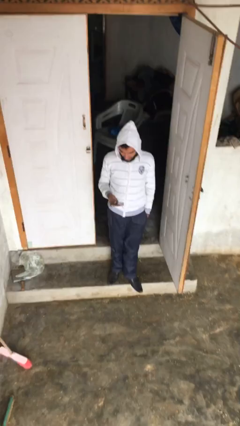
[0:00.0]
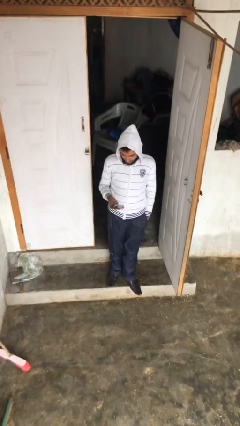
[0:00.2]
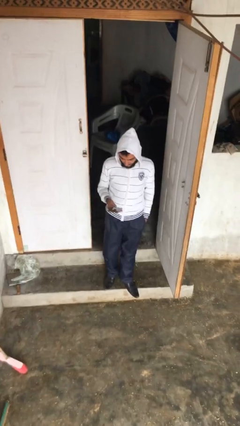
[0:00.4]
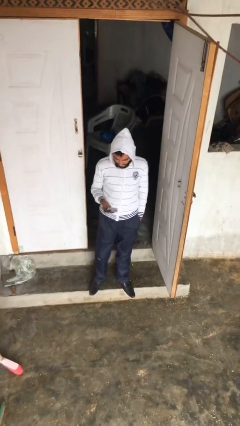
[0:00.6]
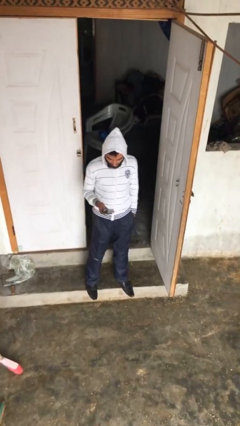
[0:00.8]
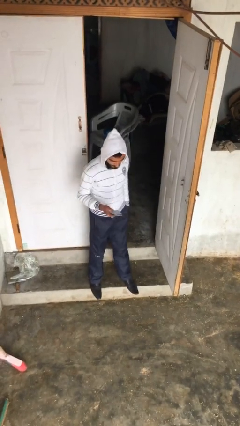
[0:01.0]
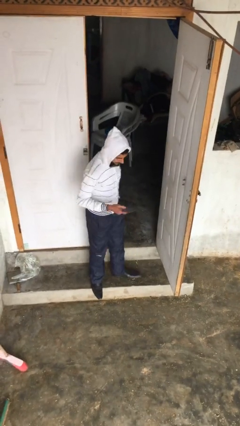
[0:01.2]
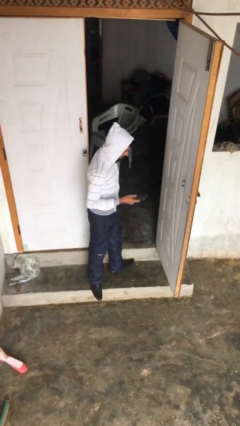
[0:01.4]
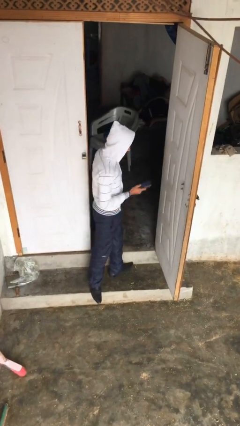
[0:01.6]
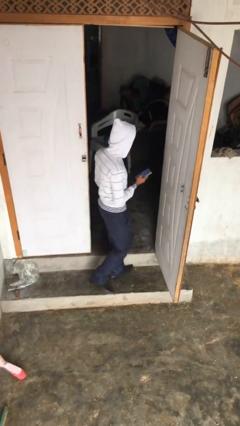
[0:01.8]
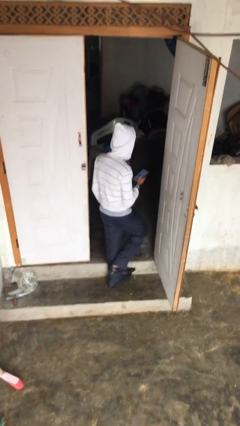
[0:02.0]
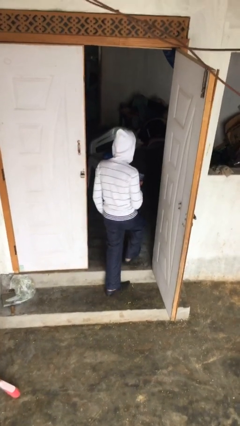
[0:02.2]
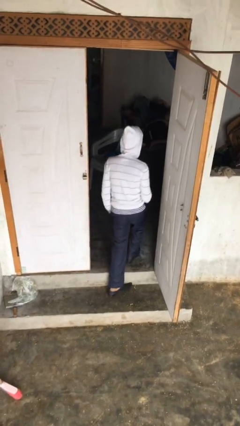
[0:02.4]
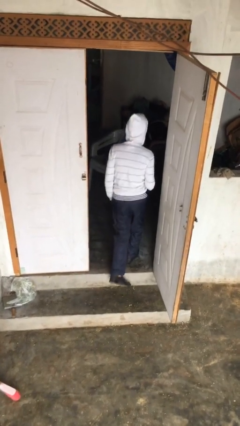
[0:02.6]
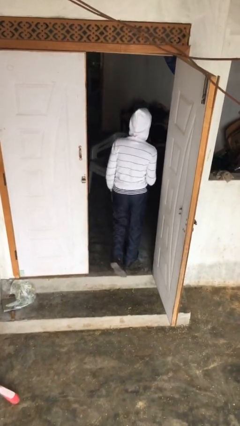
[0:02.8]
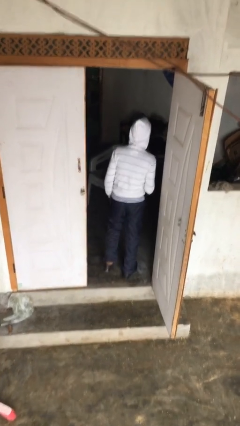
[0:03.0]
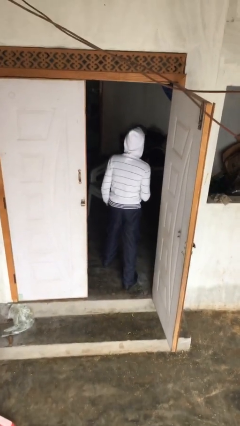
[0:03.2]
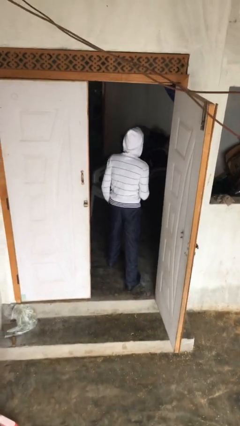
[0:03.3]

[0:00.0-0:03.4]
person exits scene through structure

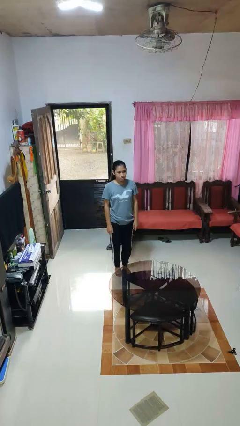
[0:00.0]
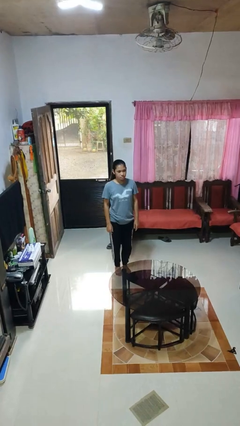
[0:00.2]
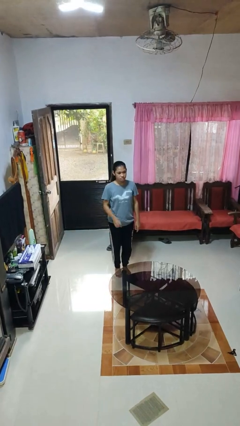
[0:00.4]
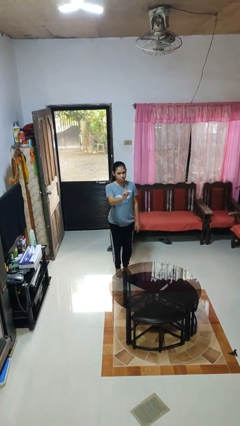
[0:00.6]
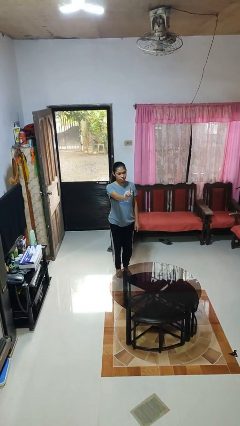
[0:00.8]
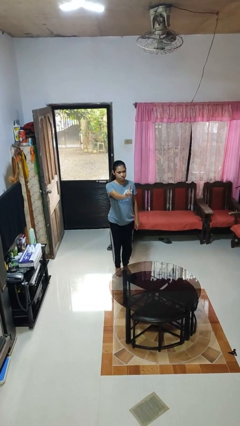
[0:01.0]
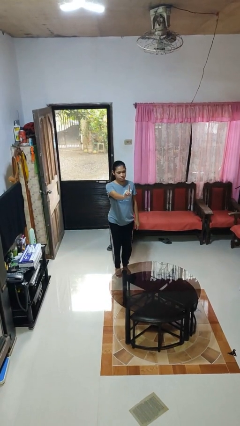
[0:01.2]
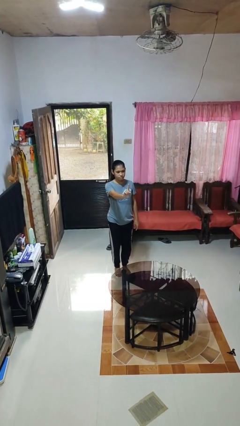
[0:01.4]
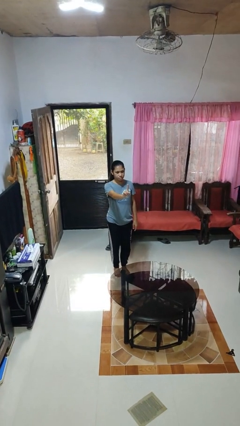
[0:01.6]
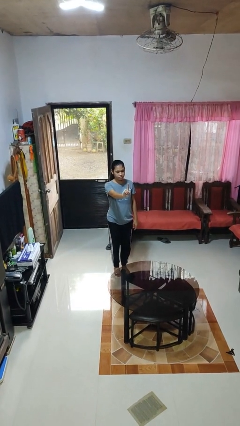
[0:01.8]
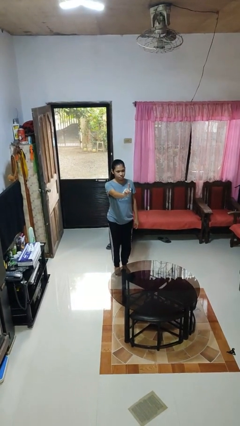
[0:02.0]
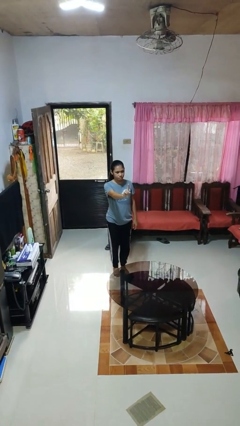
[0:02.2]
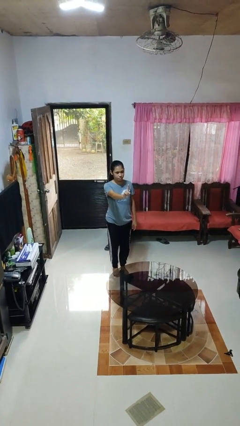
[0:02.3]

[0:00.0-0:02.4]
person gestures number one

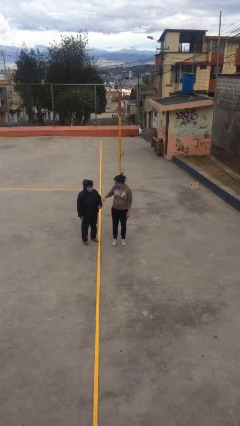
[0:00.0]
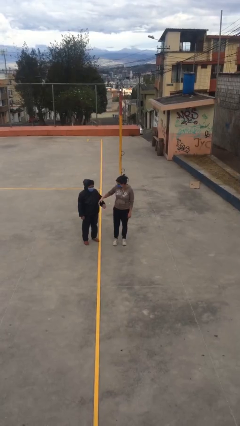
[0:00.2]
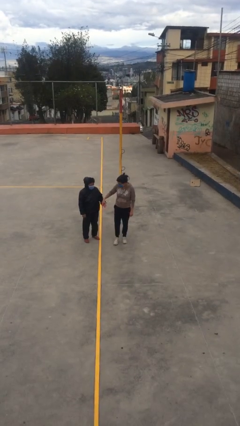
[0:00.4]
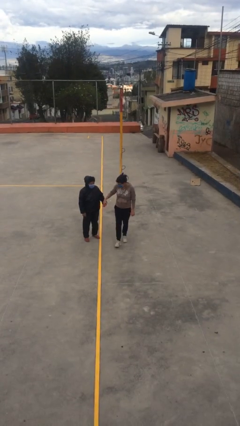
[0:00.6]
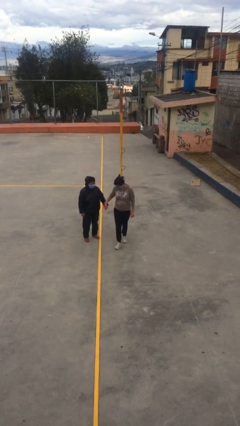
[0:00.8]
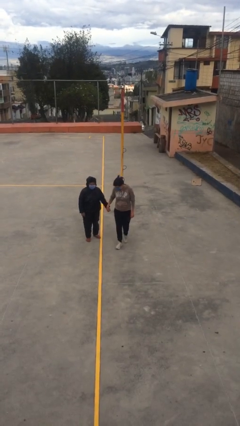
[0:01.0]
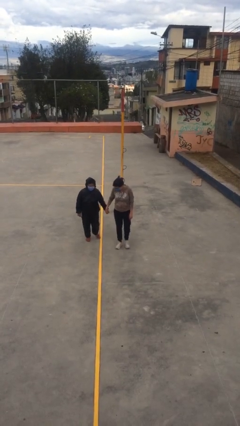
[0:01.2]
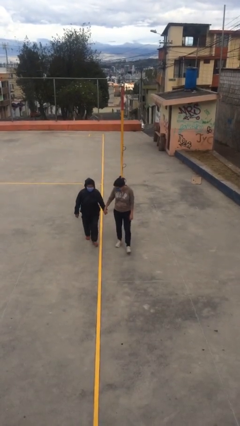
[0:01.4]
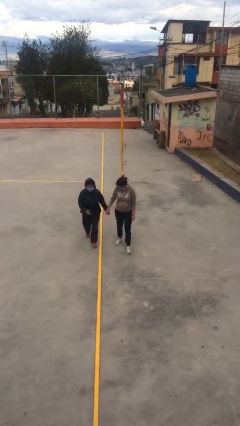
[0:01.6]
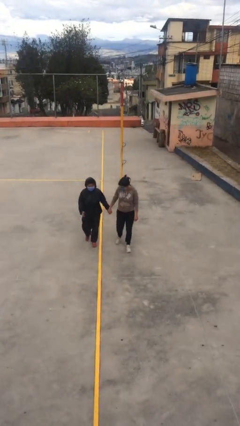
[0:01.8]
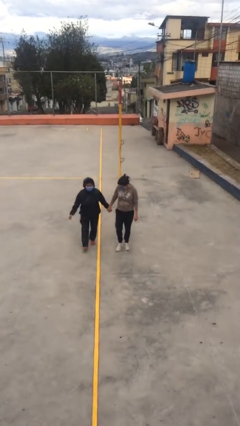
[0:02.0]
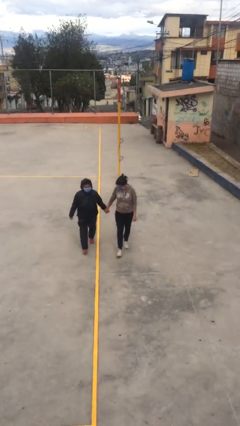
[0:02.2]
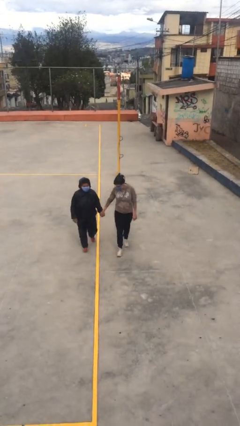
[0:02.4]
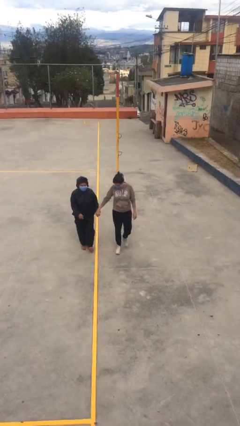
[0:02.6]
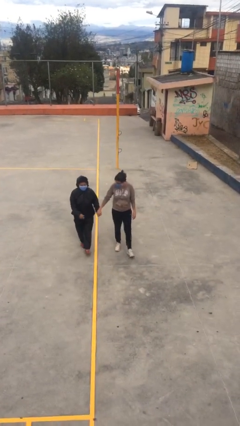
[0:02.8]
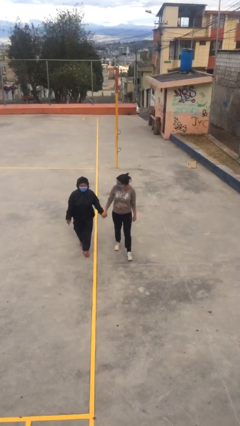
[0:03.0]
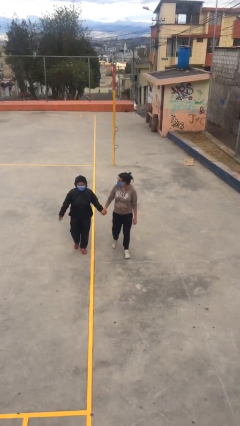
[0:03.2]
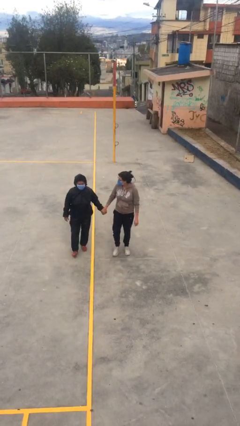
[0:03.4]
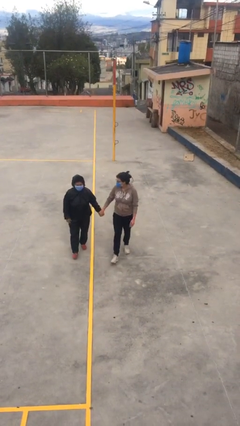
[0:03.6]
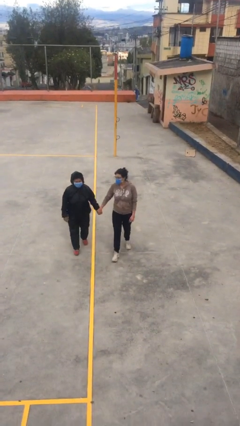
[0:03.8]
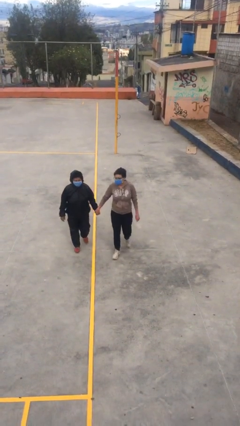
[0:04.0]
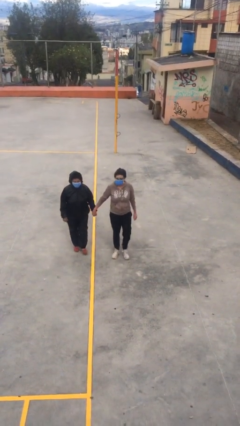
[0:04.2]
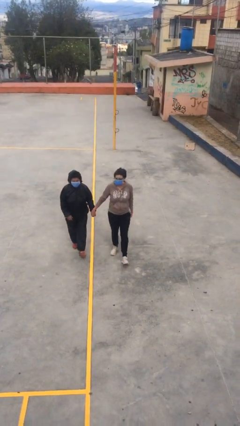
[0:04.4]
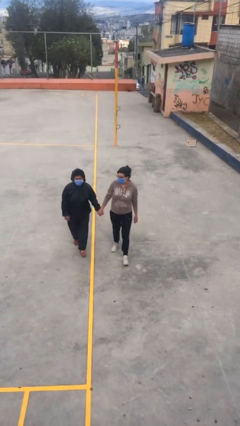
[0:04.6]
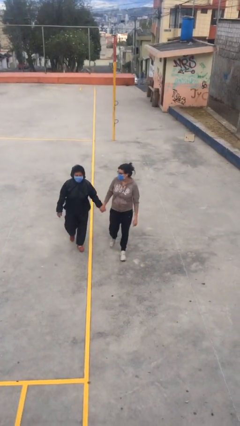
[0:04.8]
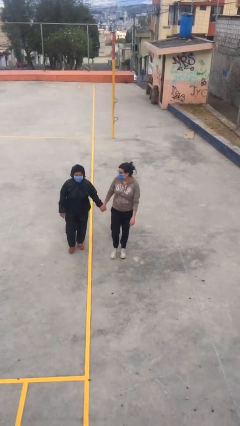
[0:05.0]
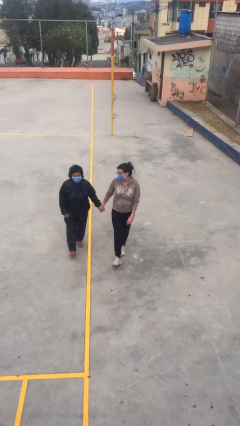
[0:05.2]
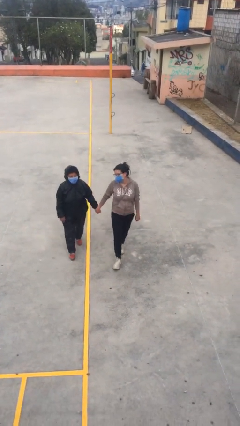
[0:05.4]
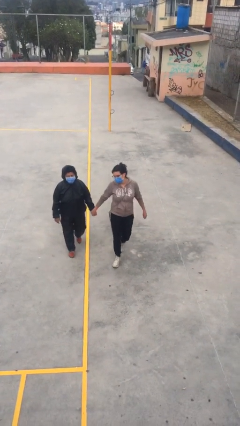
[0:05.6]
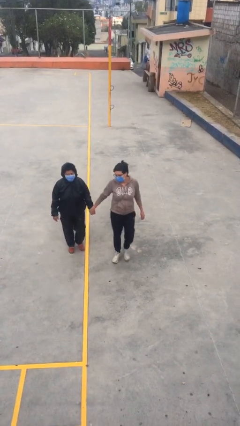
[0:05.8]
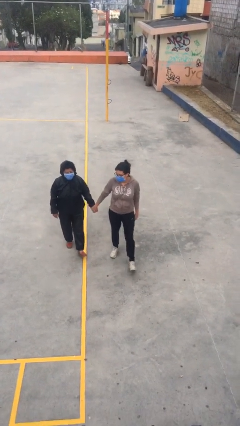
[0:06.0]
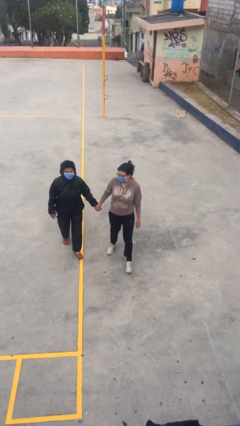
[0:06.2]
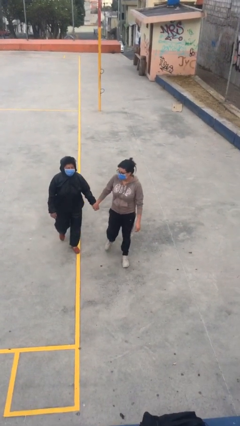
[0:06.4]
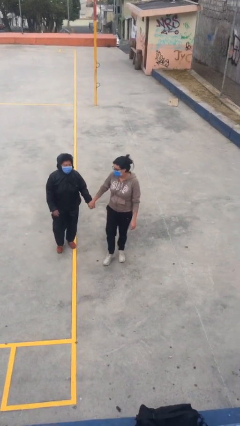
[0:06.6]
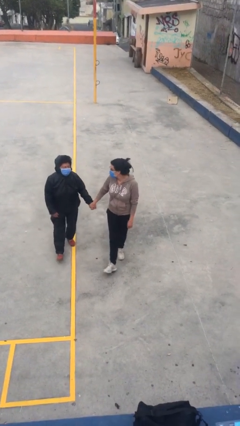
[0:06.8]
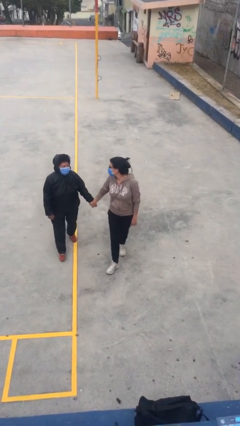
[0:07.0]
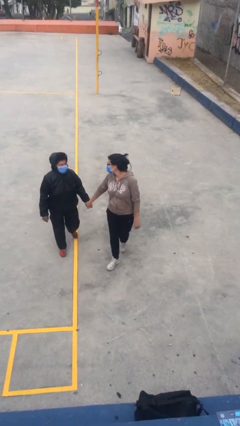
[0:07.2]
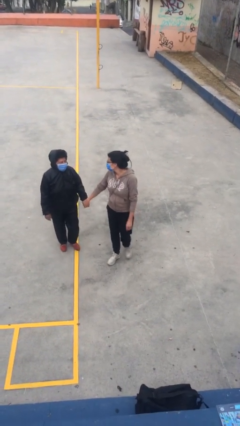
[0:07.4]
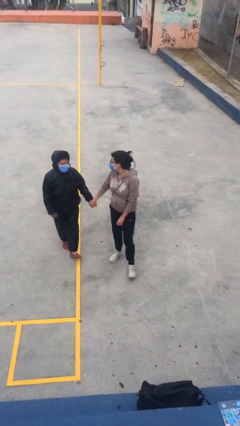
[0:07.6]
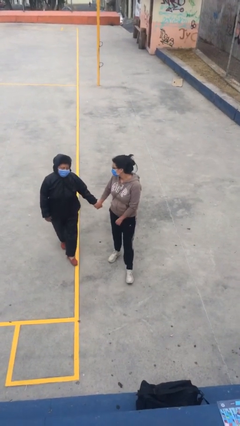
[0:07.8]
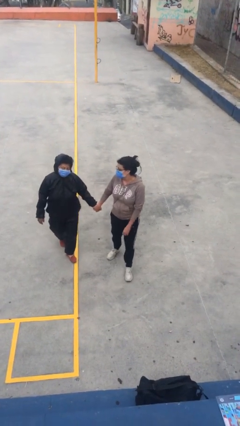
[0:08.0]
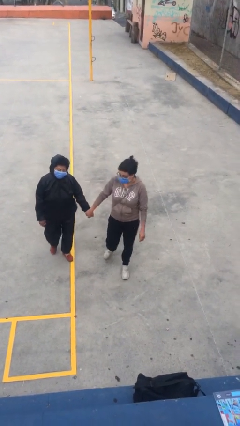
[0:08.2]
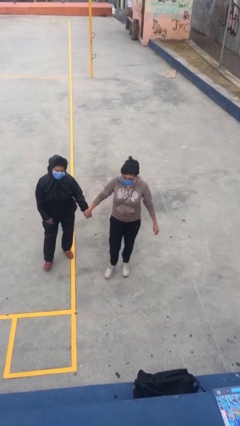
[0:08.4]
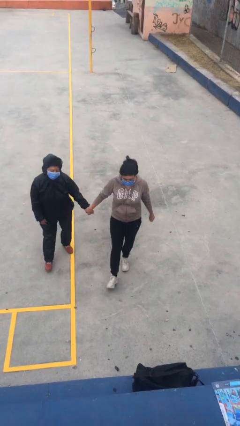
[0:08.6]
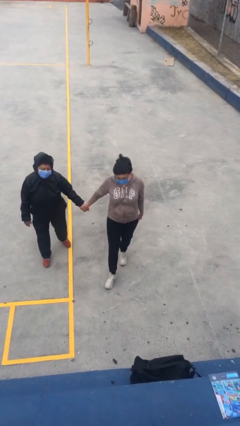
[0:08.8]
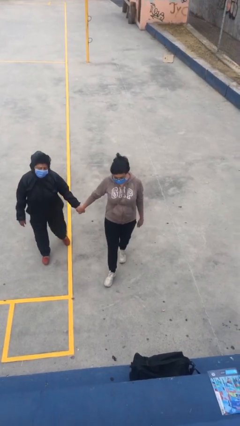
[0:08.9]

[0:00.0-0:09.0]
person holds hand

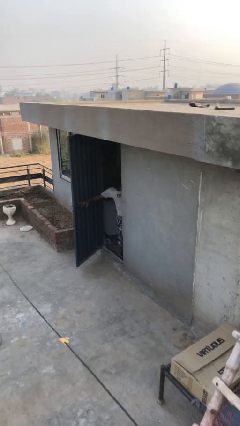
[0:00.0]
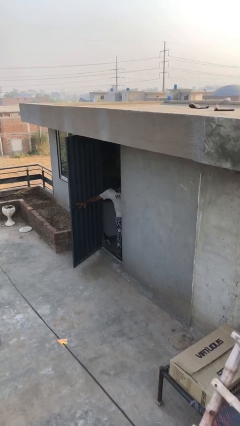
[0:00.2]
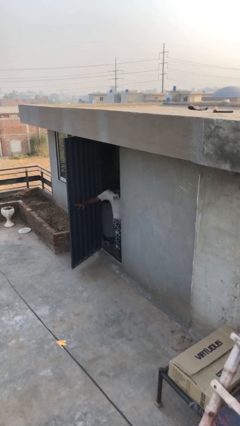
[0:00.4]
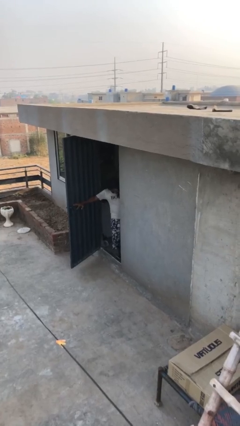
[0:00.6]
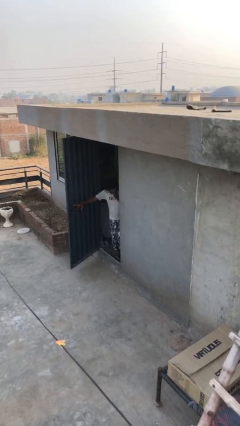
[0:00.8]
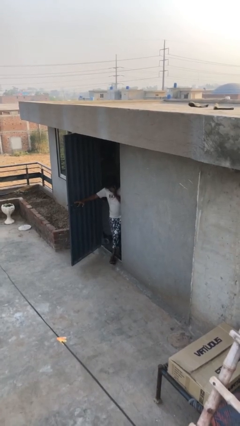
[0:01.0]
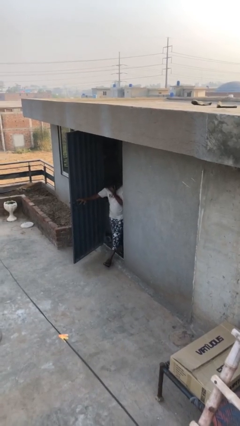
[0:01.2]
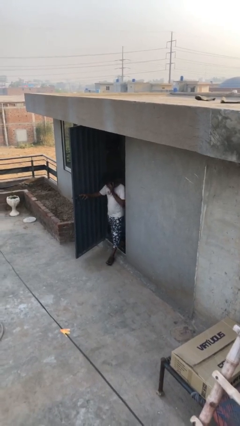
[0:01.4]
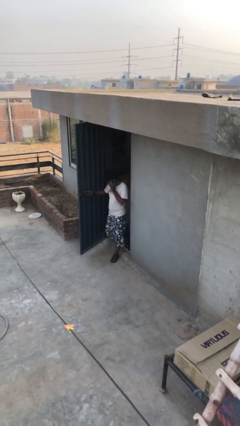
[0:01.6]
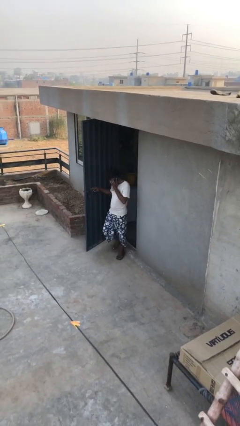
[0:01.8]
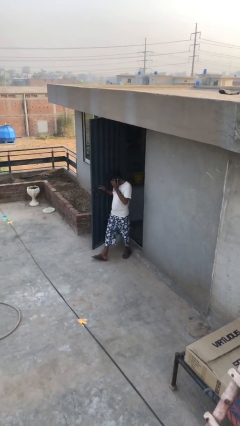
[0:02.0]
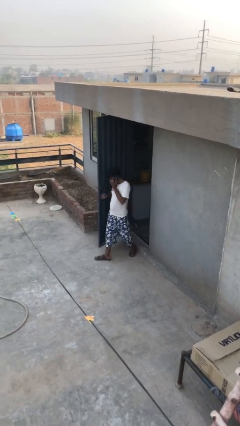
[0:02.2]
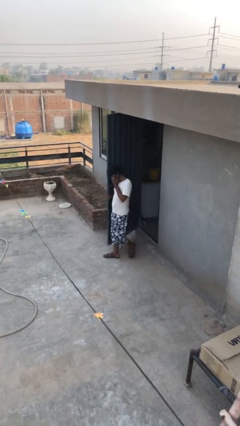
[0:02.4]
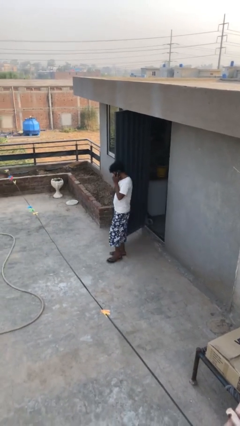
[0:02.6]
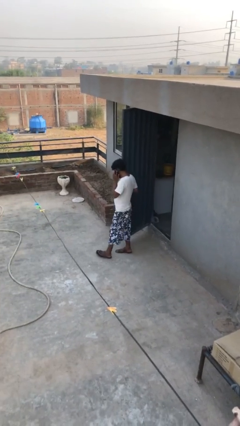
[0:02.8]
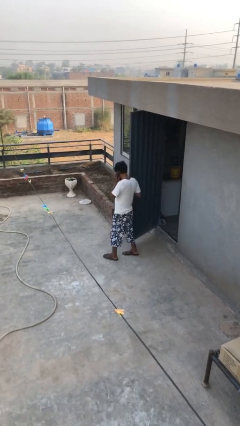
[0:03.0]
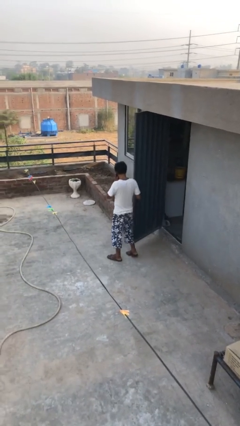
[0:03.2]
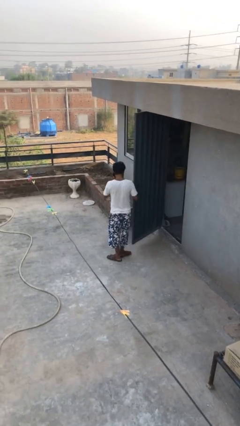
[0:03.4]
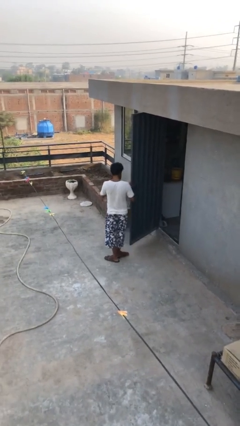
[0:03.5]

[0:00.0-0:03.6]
person enters scene through structure
